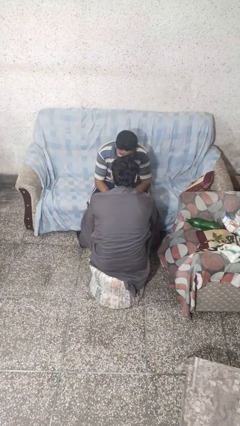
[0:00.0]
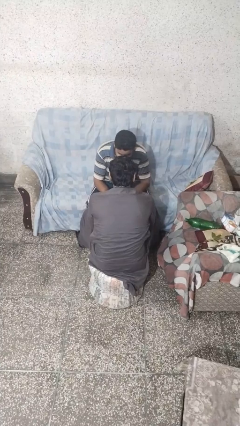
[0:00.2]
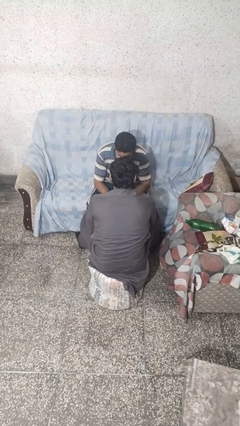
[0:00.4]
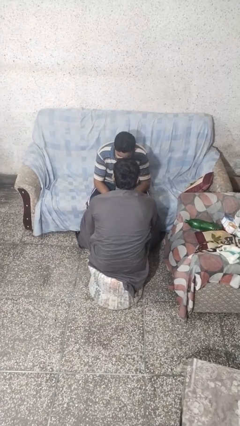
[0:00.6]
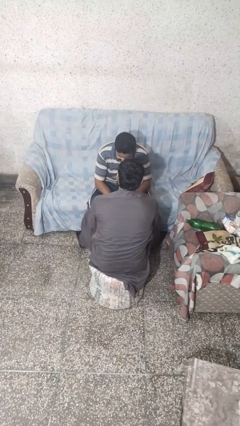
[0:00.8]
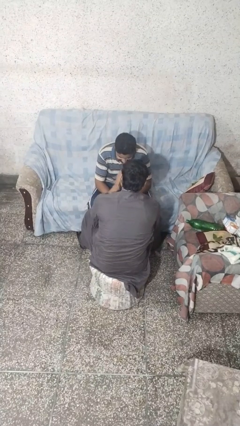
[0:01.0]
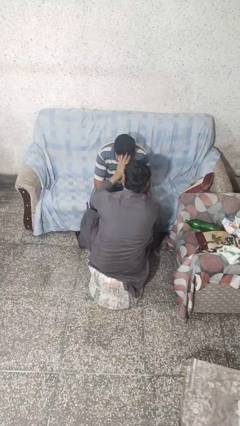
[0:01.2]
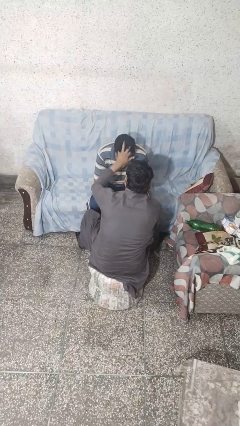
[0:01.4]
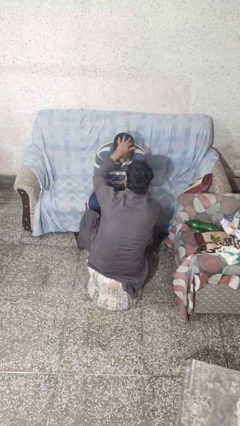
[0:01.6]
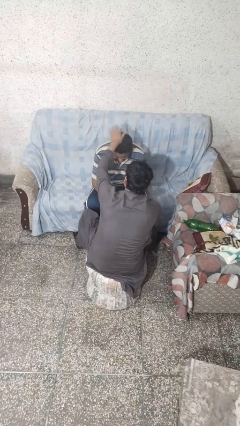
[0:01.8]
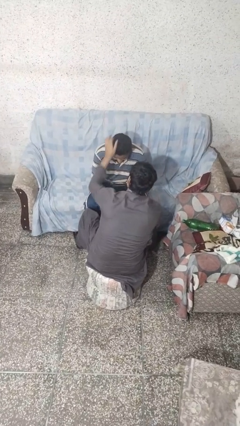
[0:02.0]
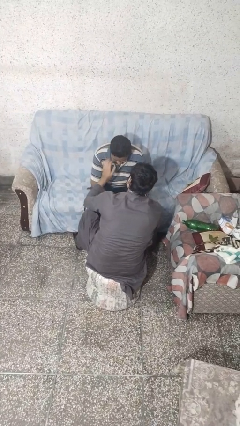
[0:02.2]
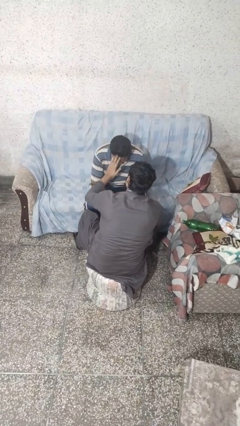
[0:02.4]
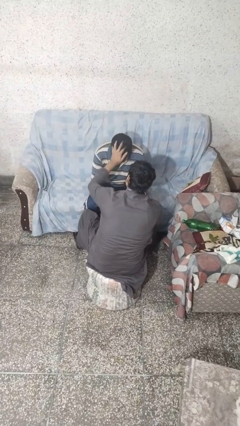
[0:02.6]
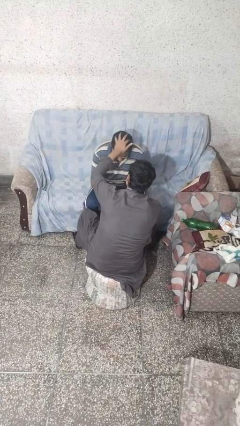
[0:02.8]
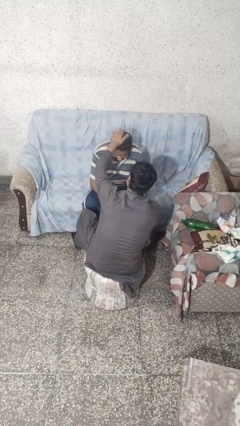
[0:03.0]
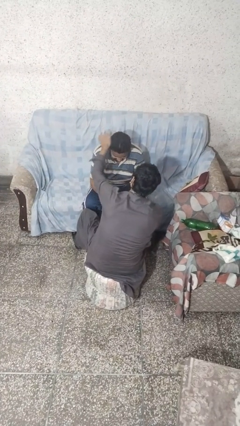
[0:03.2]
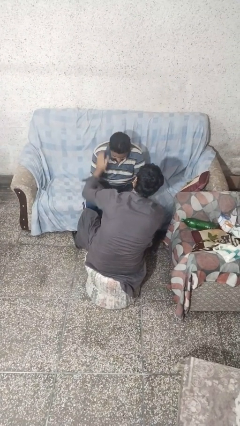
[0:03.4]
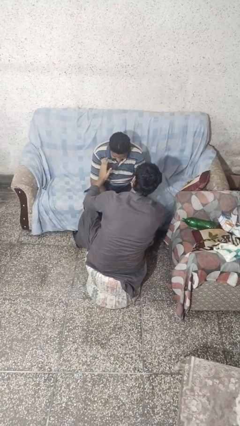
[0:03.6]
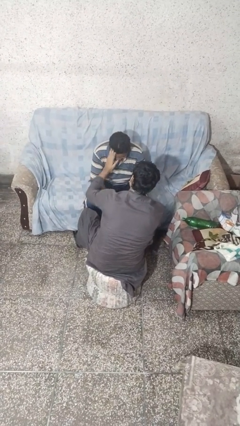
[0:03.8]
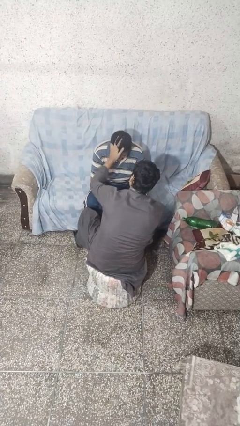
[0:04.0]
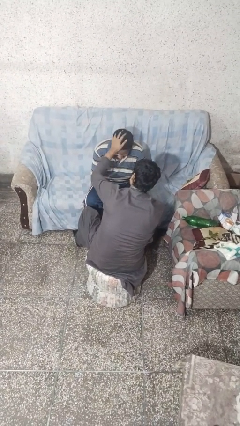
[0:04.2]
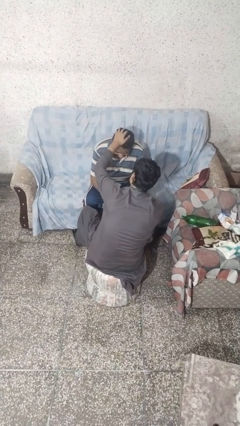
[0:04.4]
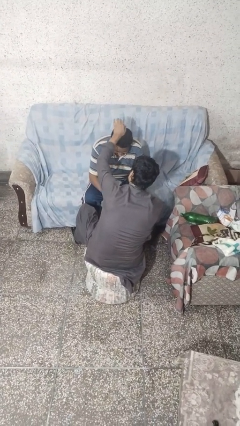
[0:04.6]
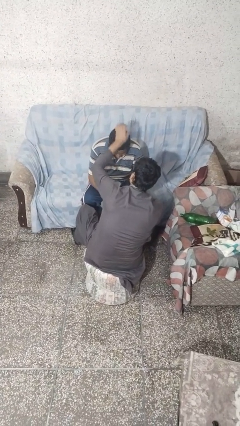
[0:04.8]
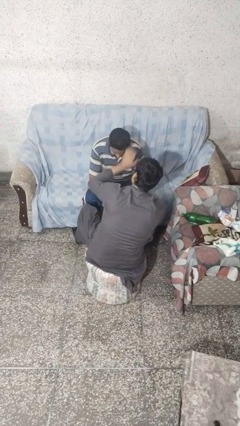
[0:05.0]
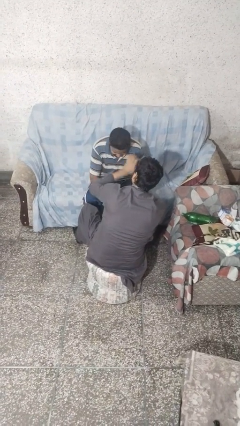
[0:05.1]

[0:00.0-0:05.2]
person braids hair of person

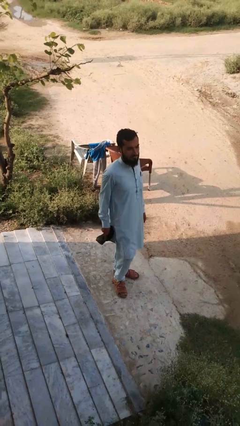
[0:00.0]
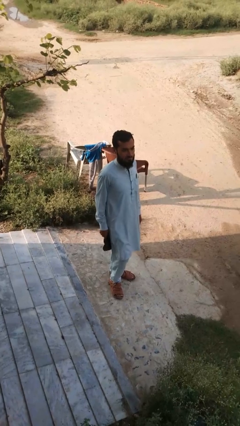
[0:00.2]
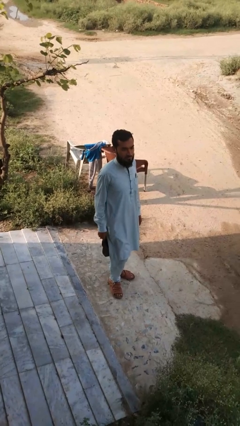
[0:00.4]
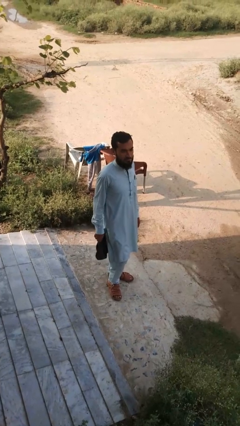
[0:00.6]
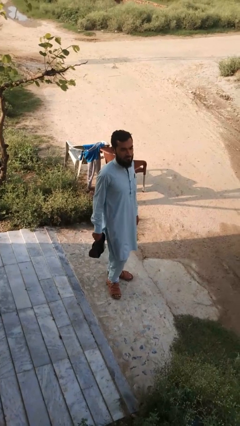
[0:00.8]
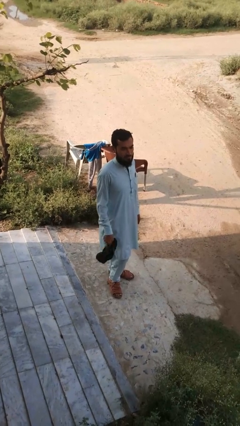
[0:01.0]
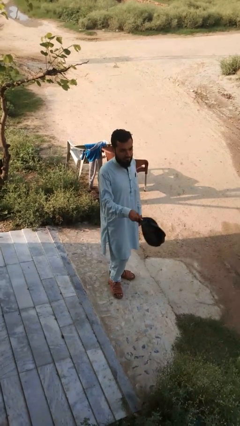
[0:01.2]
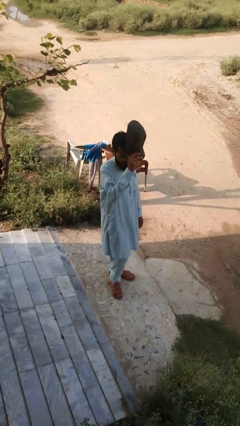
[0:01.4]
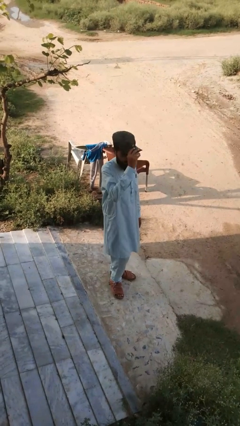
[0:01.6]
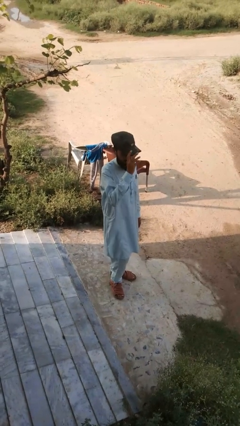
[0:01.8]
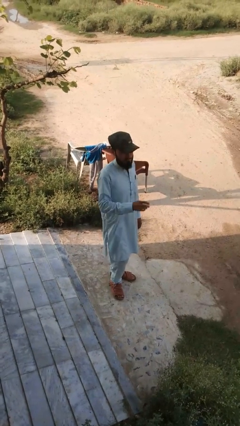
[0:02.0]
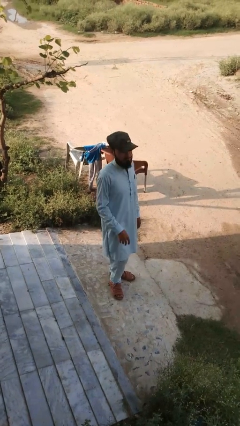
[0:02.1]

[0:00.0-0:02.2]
person puts on hat

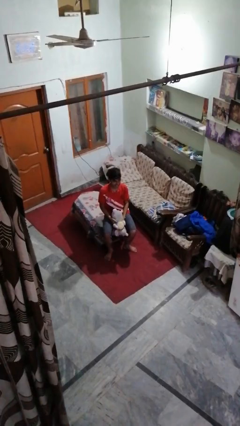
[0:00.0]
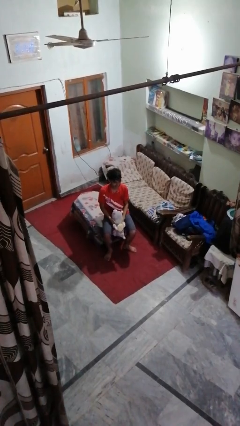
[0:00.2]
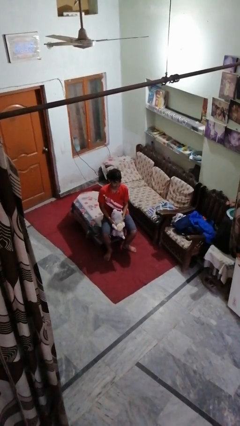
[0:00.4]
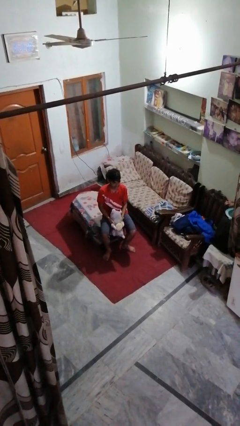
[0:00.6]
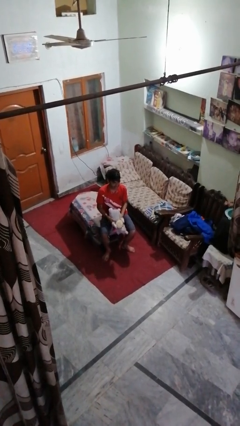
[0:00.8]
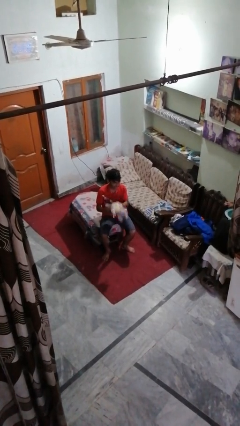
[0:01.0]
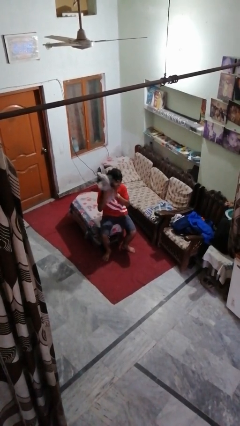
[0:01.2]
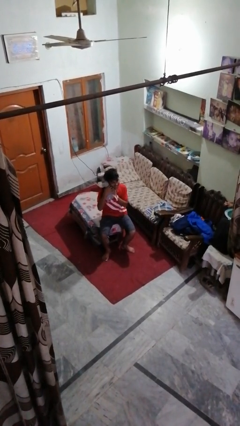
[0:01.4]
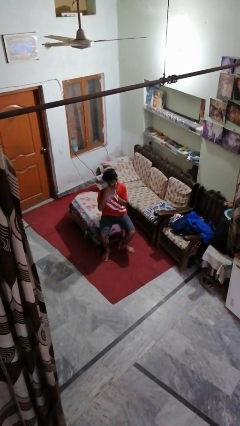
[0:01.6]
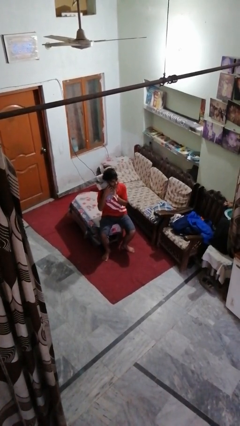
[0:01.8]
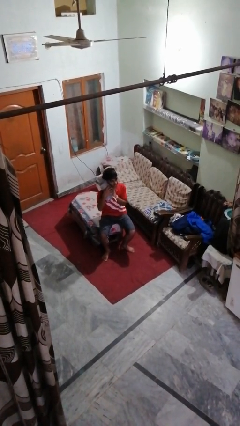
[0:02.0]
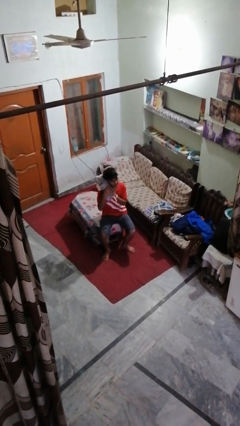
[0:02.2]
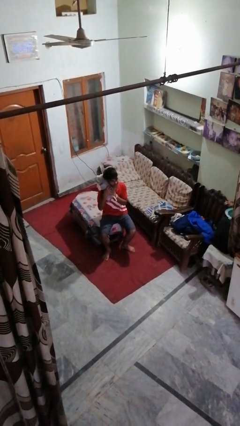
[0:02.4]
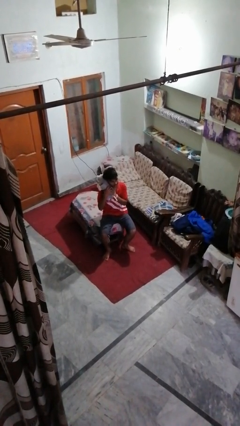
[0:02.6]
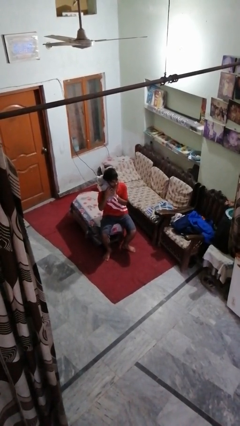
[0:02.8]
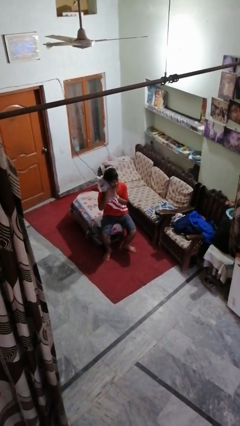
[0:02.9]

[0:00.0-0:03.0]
person hugs stuffed animal

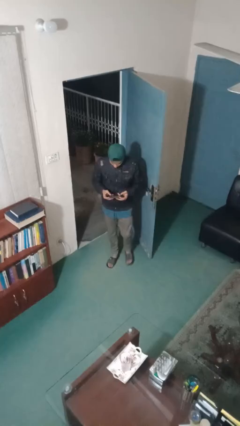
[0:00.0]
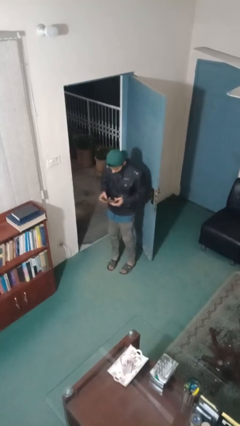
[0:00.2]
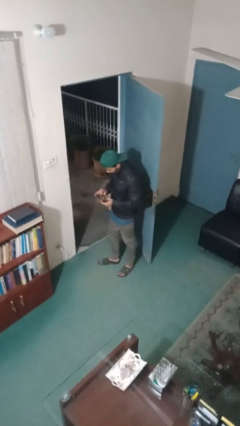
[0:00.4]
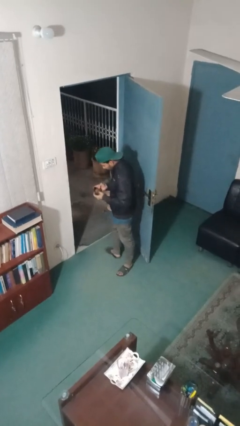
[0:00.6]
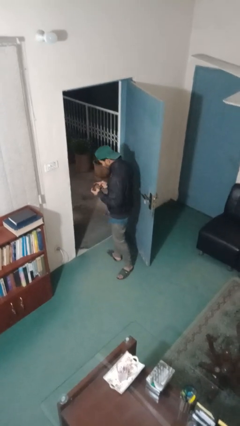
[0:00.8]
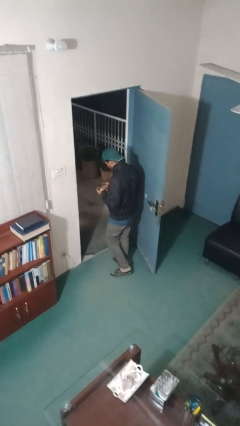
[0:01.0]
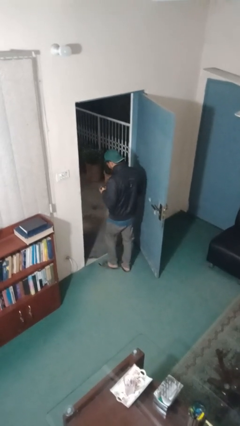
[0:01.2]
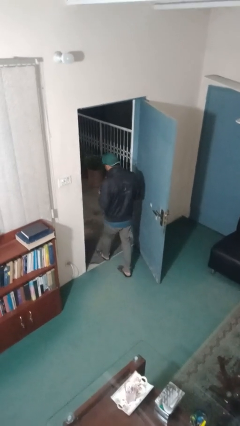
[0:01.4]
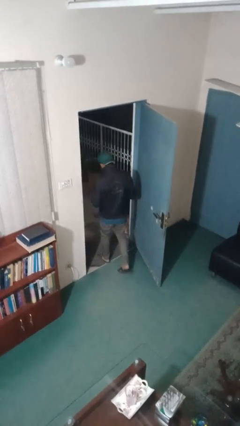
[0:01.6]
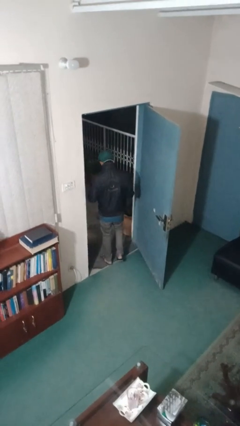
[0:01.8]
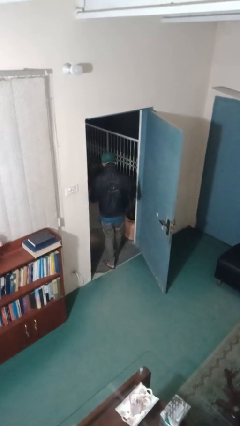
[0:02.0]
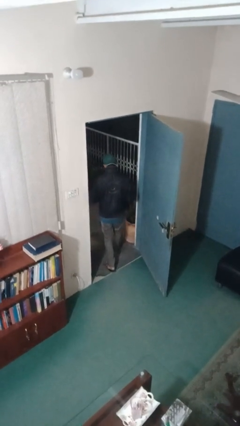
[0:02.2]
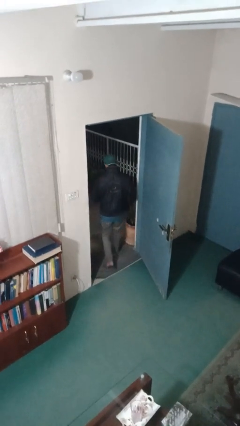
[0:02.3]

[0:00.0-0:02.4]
person exits scene through structure

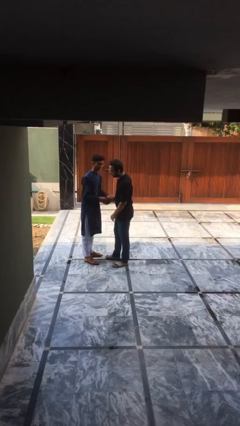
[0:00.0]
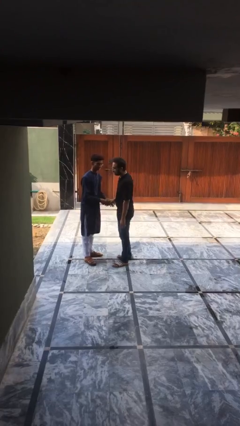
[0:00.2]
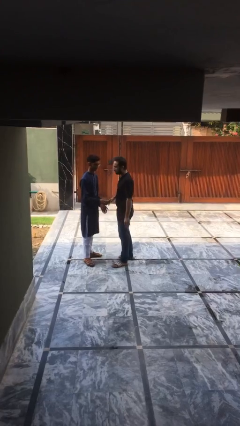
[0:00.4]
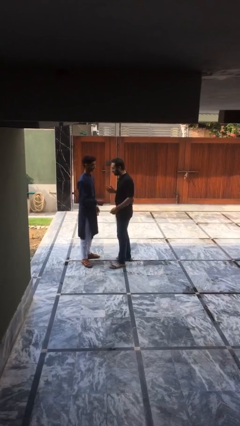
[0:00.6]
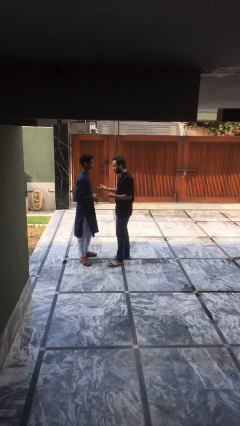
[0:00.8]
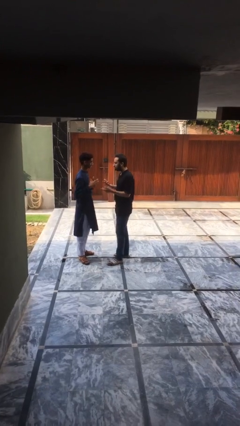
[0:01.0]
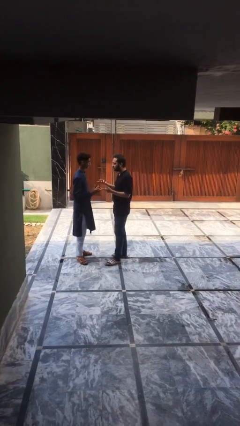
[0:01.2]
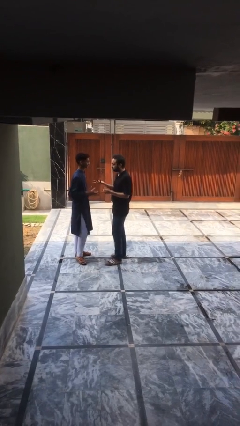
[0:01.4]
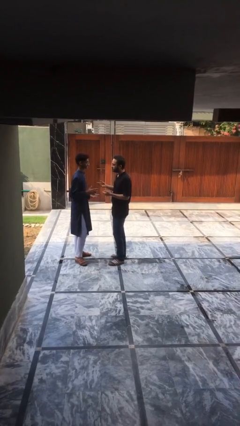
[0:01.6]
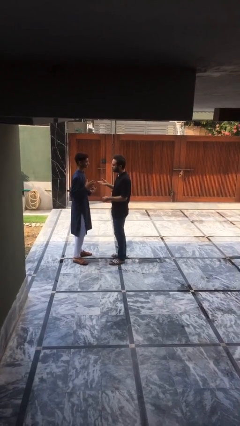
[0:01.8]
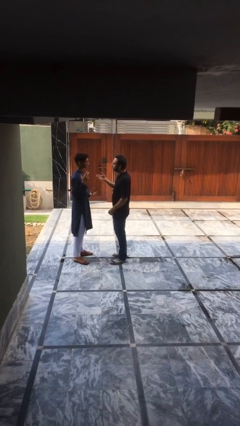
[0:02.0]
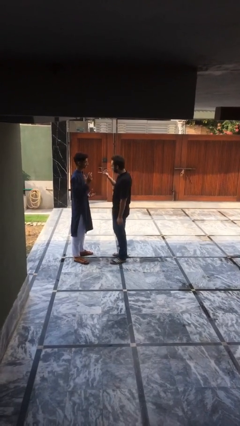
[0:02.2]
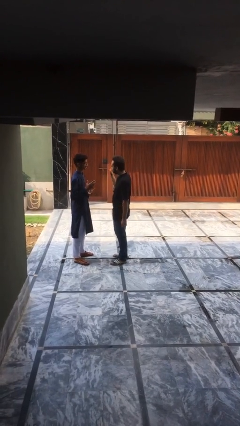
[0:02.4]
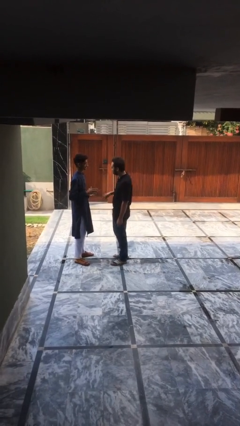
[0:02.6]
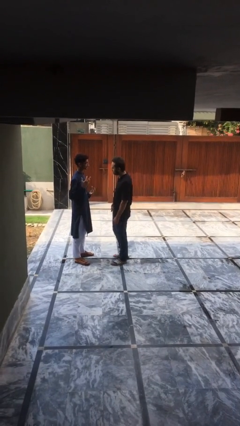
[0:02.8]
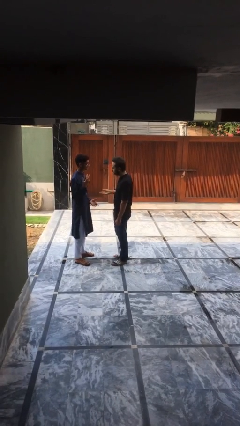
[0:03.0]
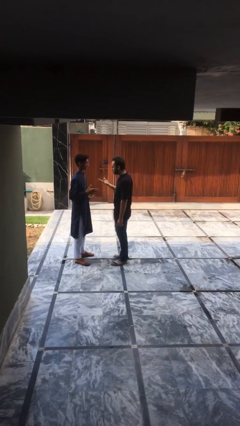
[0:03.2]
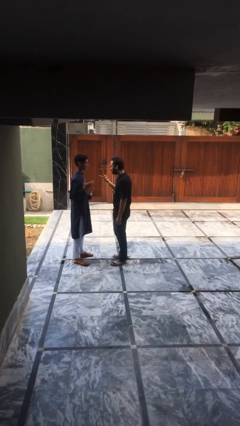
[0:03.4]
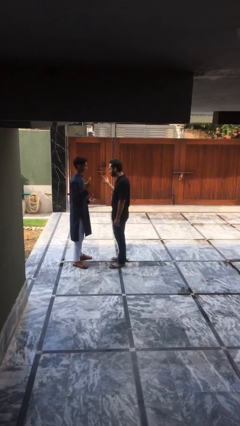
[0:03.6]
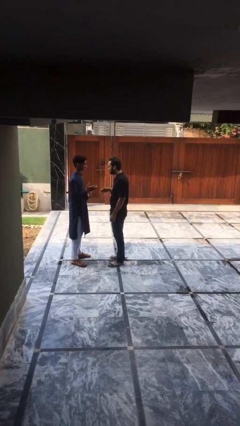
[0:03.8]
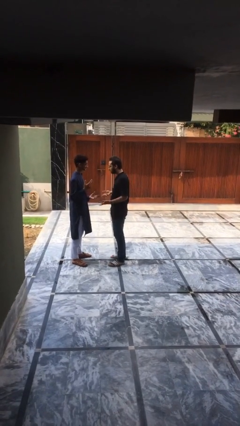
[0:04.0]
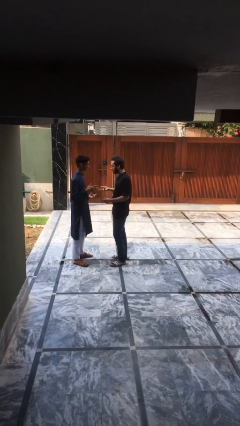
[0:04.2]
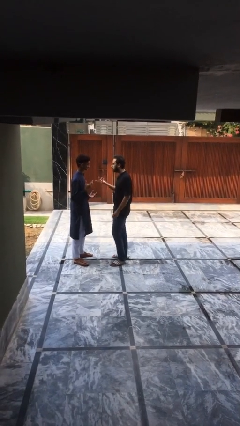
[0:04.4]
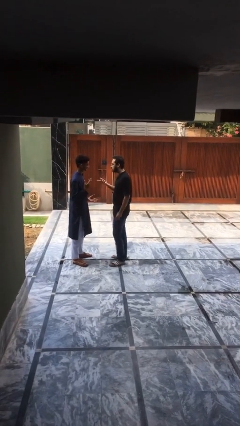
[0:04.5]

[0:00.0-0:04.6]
person talks to person
